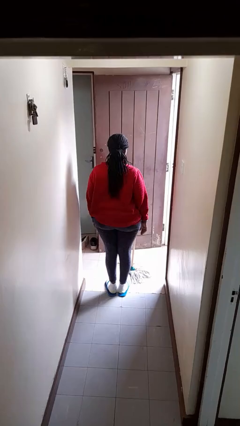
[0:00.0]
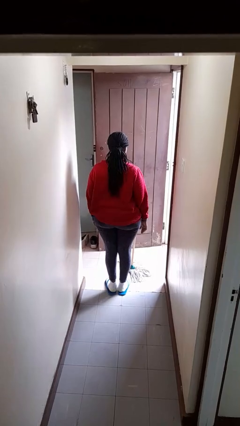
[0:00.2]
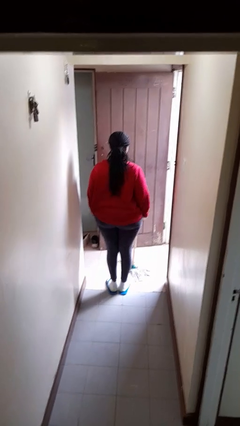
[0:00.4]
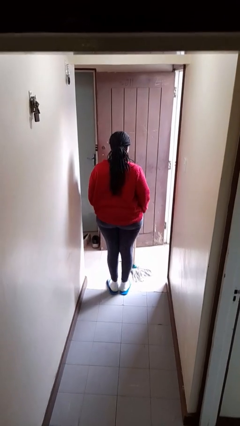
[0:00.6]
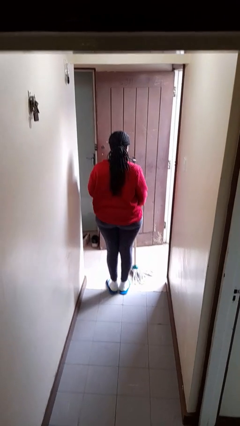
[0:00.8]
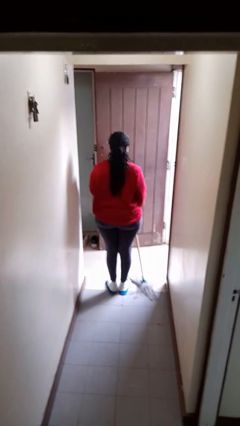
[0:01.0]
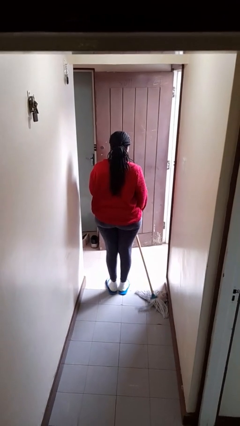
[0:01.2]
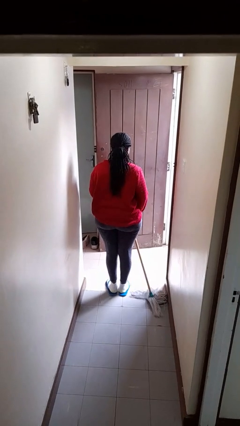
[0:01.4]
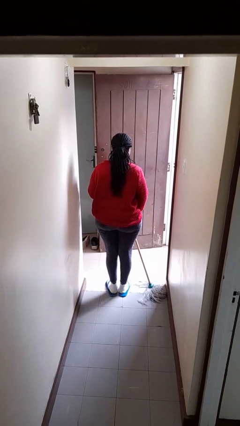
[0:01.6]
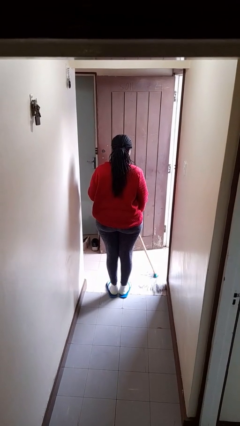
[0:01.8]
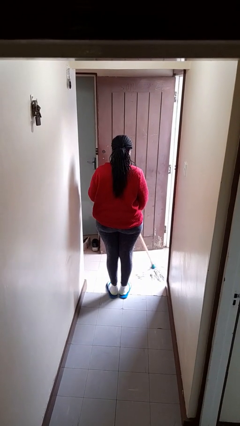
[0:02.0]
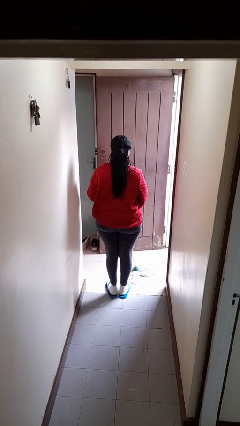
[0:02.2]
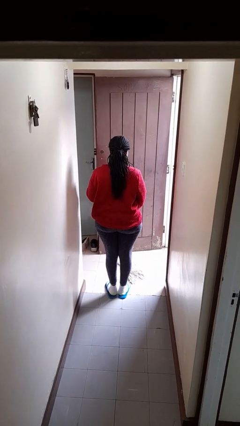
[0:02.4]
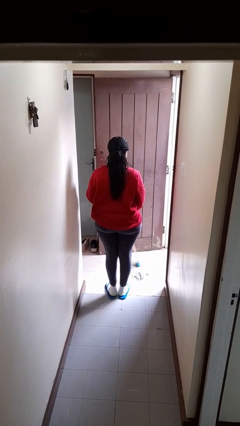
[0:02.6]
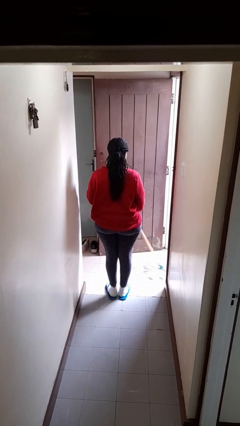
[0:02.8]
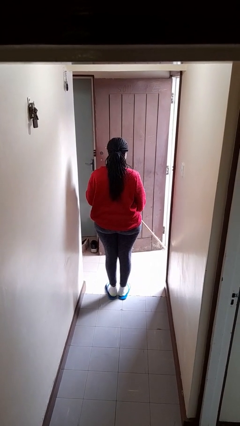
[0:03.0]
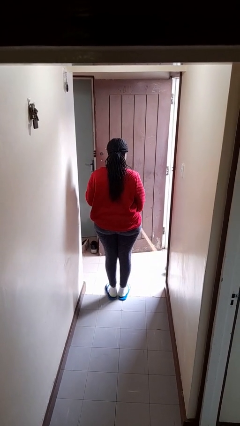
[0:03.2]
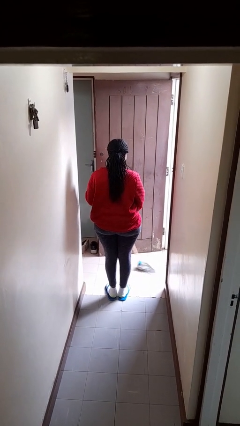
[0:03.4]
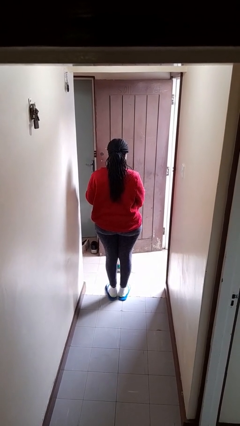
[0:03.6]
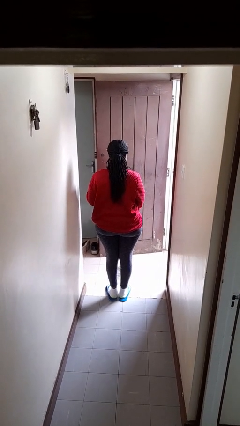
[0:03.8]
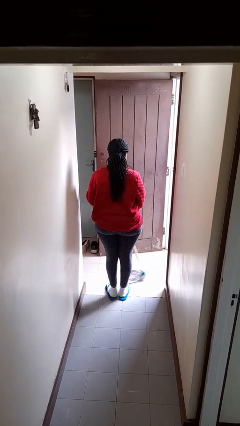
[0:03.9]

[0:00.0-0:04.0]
person mops

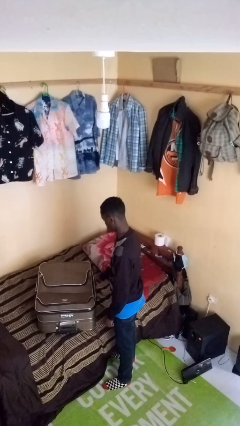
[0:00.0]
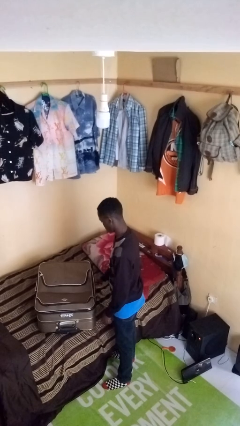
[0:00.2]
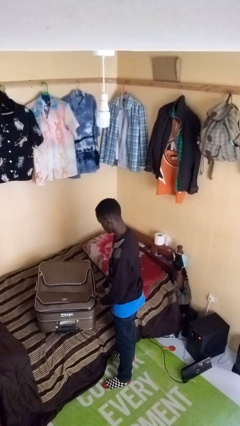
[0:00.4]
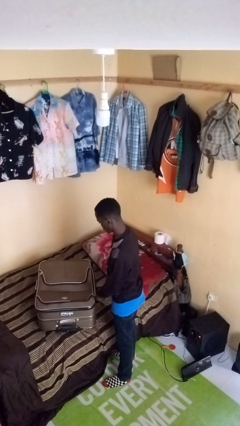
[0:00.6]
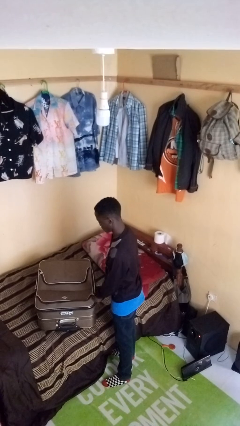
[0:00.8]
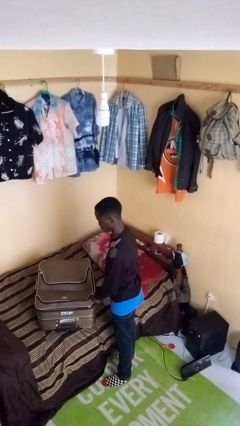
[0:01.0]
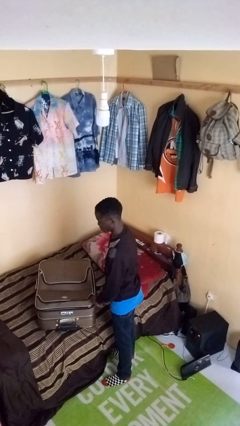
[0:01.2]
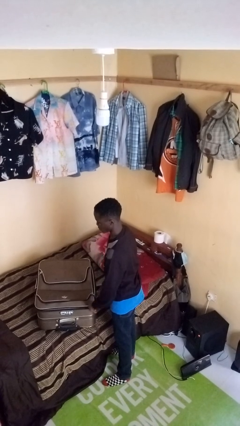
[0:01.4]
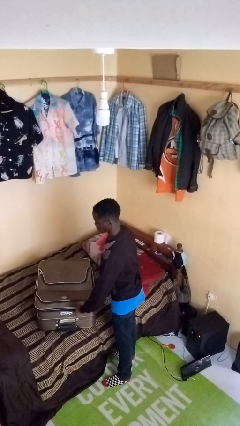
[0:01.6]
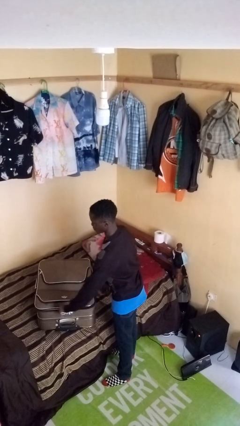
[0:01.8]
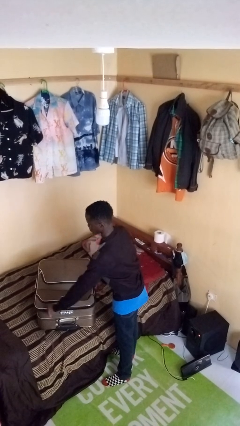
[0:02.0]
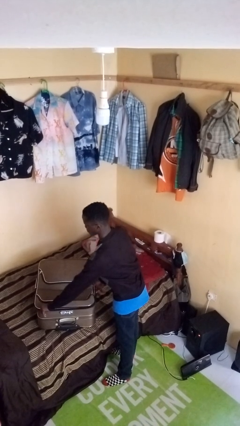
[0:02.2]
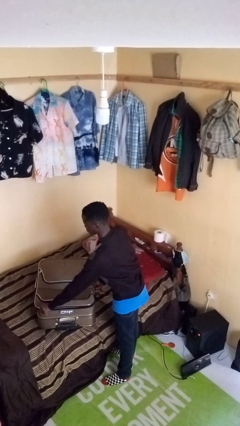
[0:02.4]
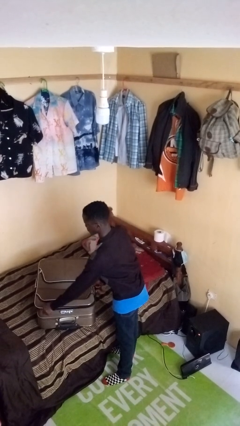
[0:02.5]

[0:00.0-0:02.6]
person opens suitcase

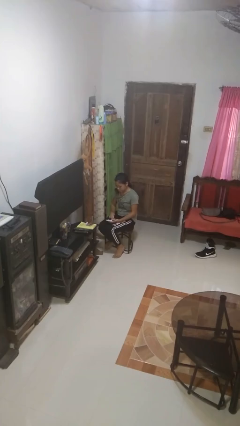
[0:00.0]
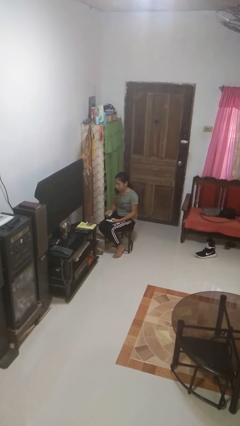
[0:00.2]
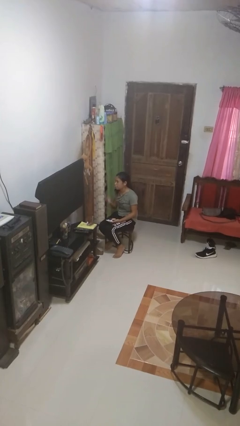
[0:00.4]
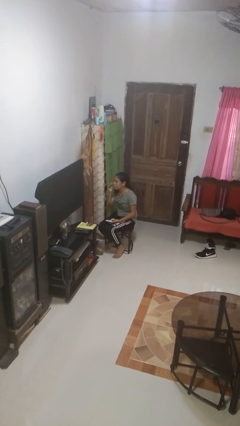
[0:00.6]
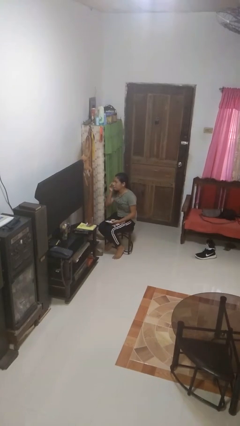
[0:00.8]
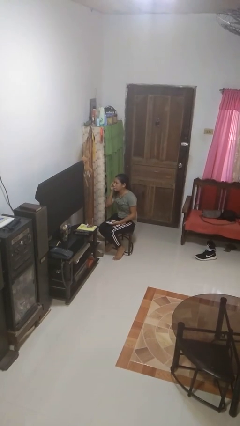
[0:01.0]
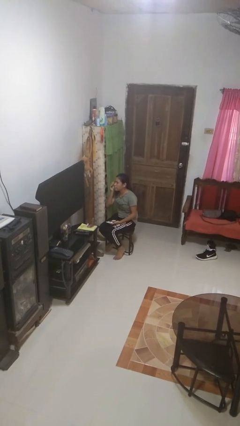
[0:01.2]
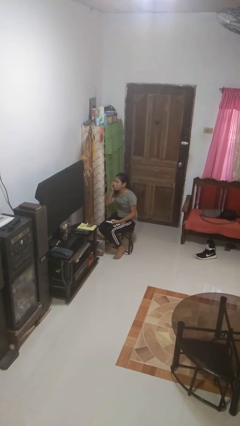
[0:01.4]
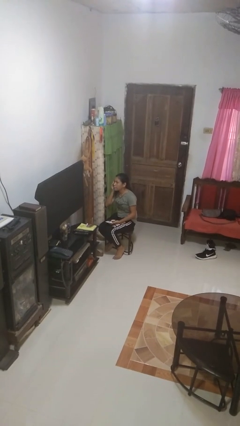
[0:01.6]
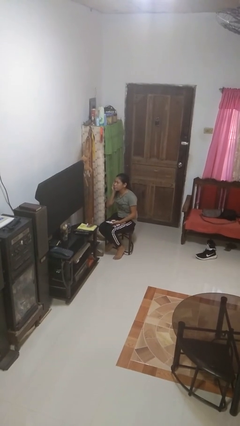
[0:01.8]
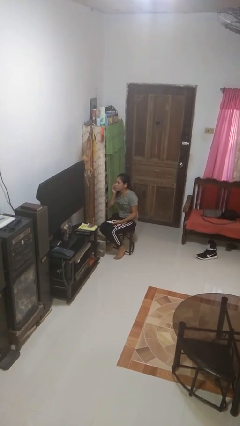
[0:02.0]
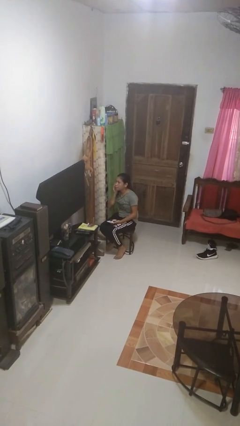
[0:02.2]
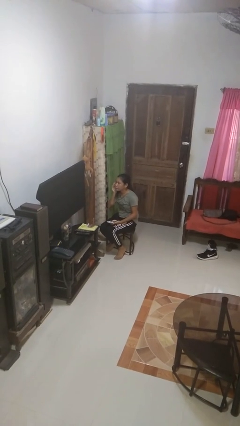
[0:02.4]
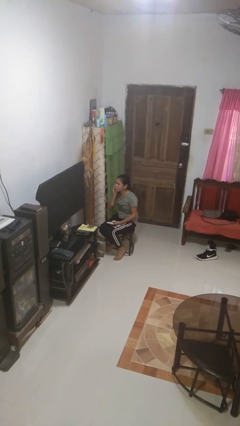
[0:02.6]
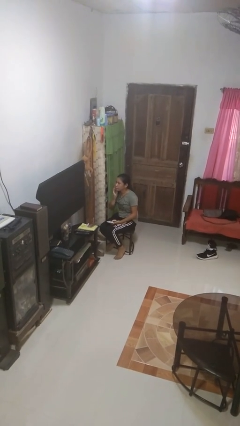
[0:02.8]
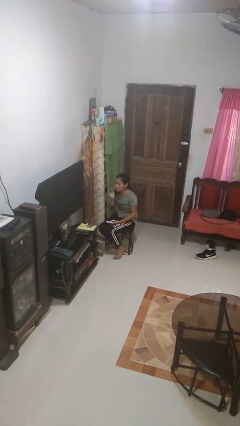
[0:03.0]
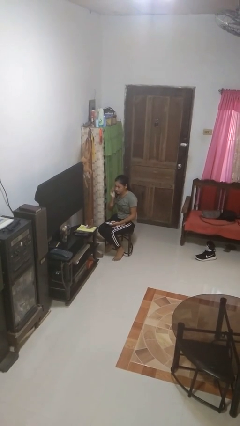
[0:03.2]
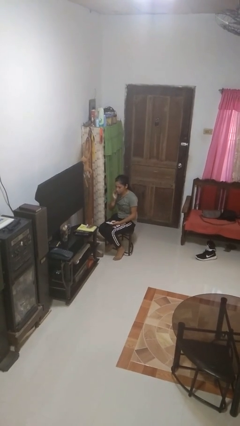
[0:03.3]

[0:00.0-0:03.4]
person applies foundation makeup

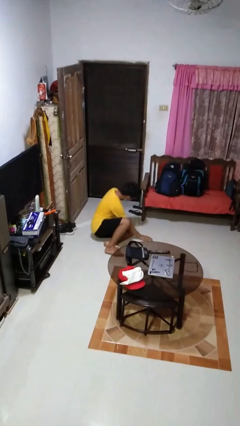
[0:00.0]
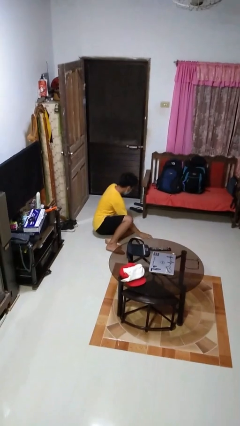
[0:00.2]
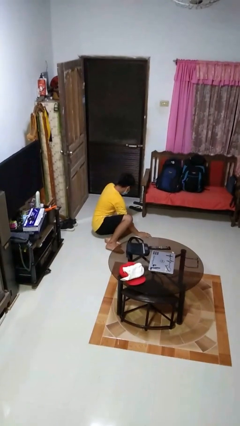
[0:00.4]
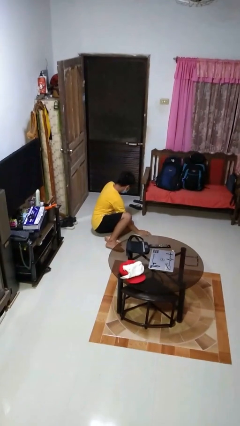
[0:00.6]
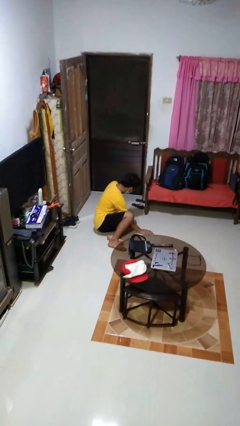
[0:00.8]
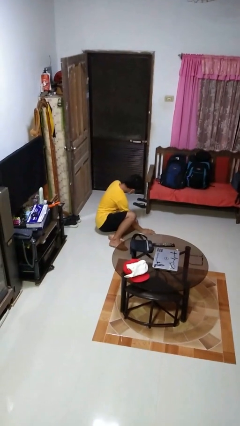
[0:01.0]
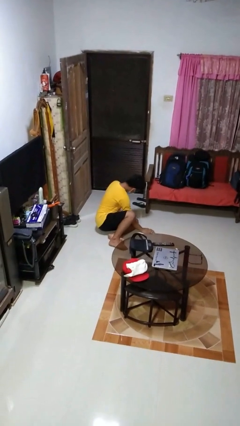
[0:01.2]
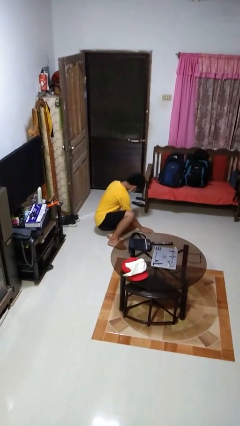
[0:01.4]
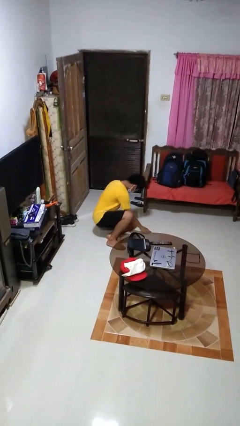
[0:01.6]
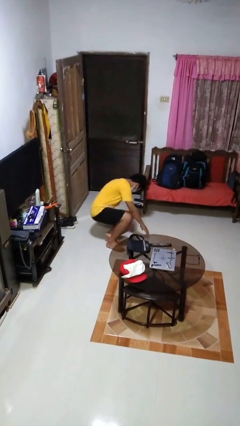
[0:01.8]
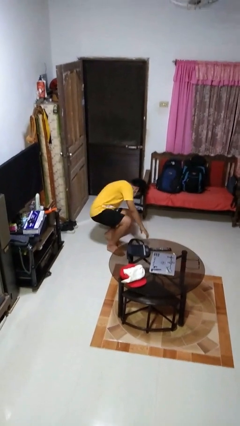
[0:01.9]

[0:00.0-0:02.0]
person lies down on floor

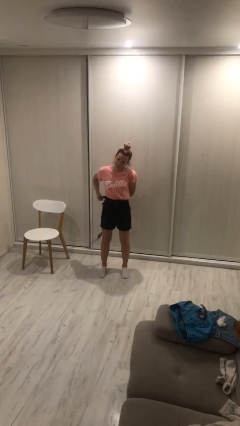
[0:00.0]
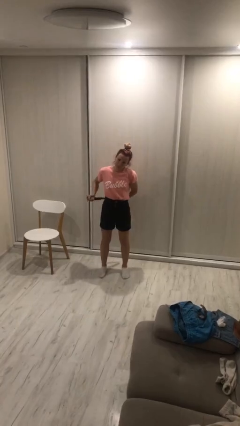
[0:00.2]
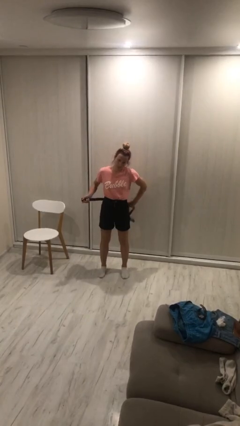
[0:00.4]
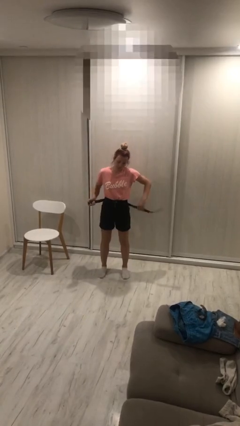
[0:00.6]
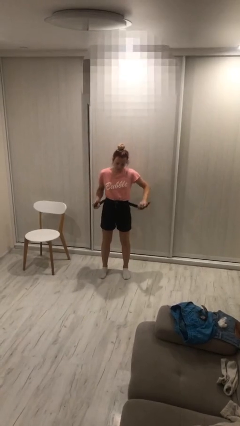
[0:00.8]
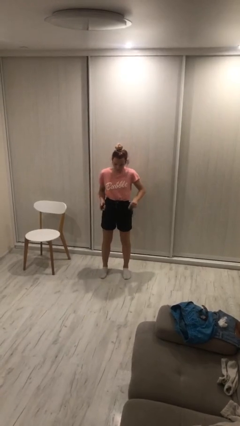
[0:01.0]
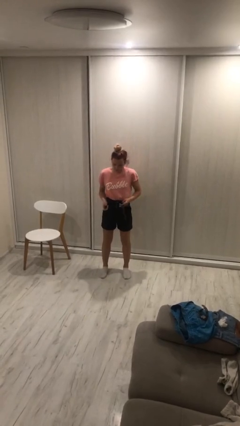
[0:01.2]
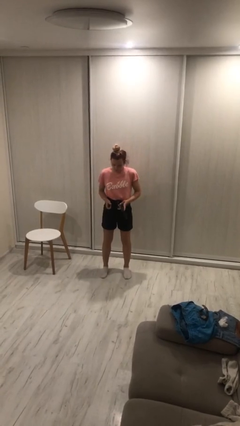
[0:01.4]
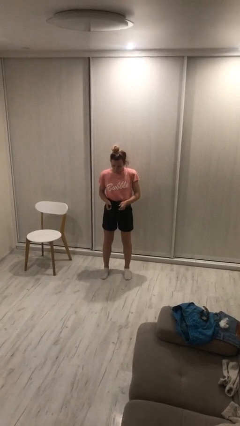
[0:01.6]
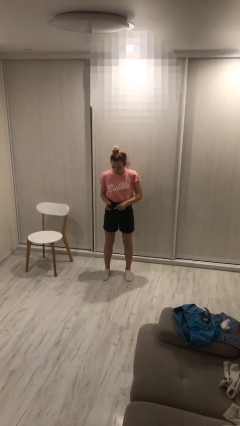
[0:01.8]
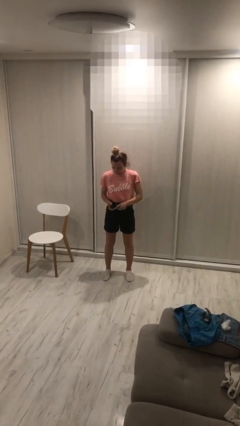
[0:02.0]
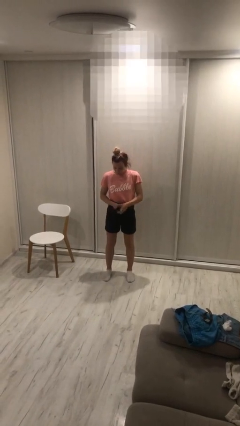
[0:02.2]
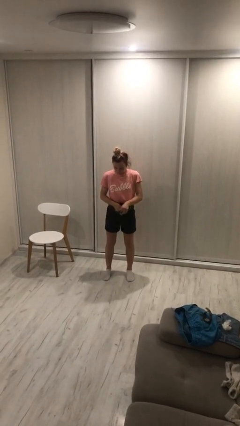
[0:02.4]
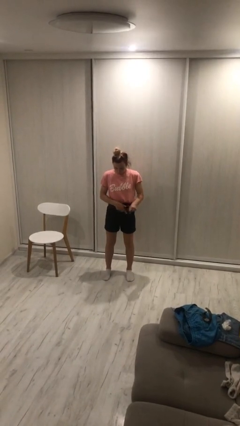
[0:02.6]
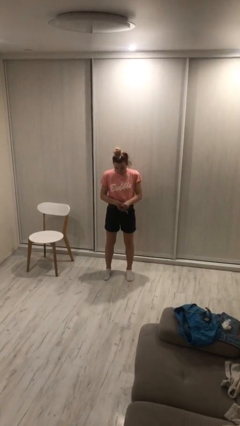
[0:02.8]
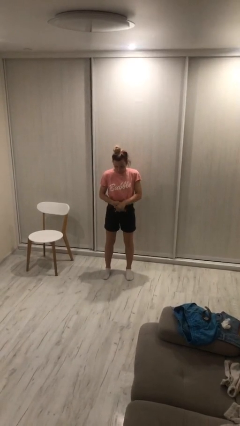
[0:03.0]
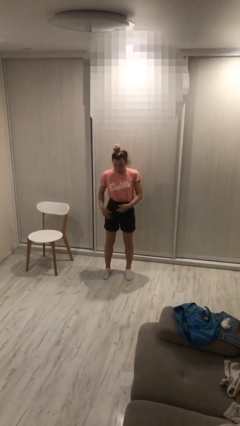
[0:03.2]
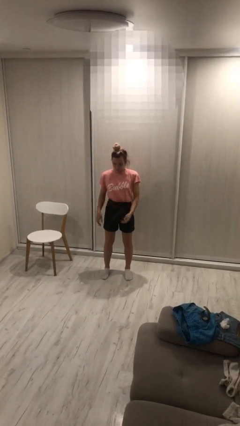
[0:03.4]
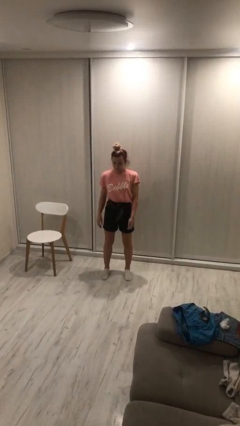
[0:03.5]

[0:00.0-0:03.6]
person puts on belt

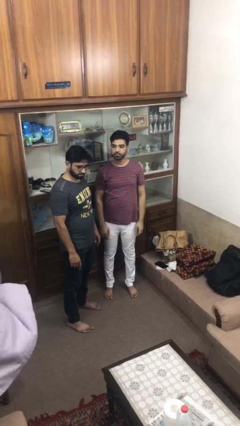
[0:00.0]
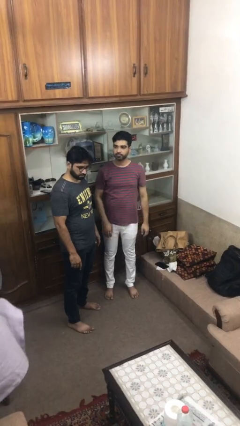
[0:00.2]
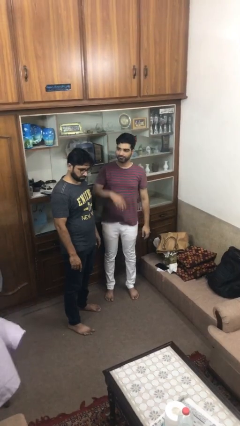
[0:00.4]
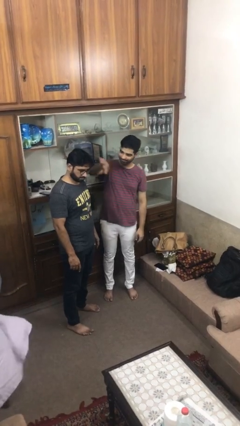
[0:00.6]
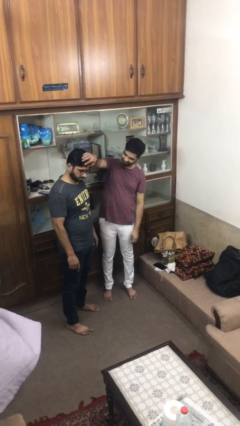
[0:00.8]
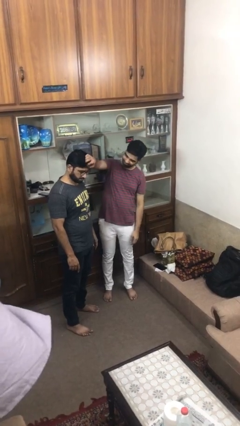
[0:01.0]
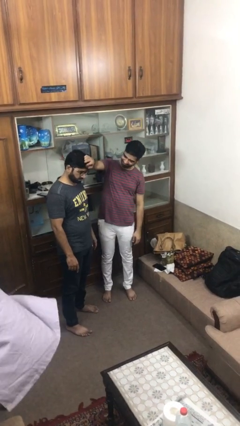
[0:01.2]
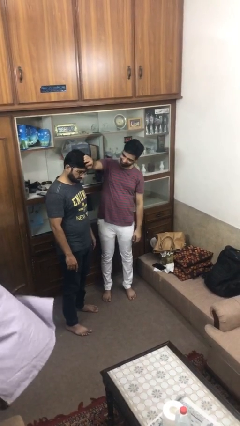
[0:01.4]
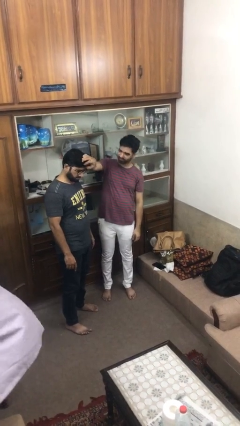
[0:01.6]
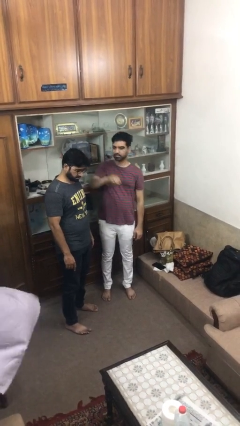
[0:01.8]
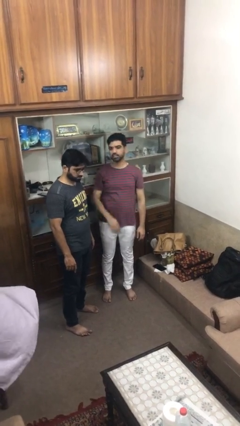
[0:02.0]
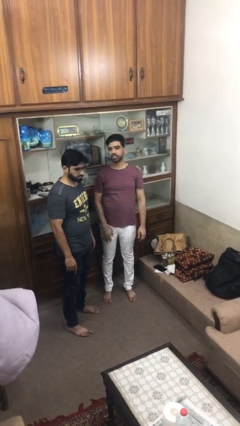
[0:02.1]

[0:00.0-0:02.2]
person grabs person by hair
